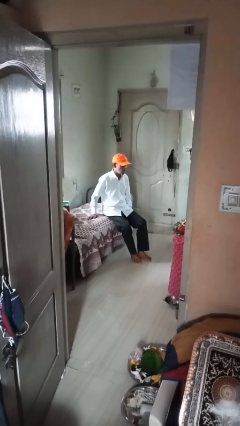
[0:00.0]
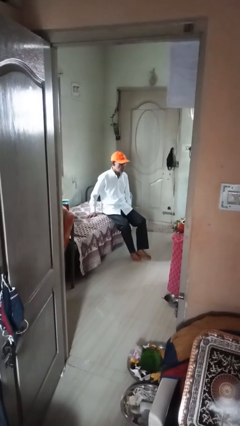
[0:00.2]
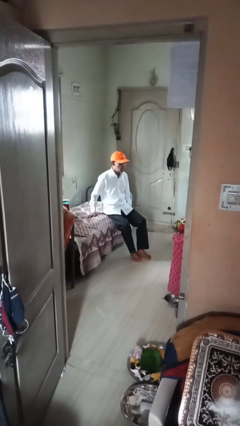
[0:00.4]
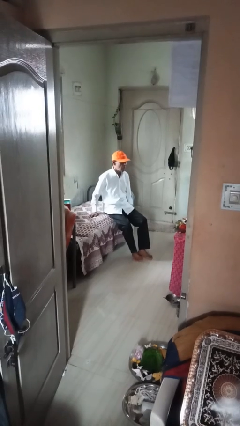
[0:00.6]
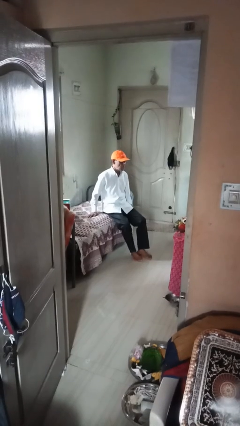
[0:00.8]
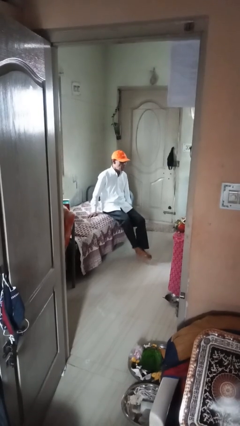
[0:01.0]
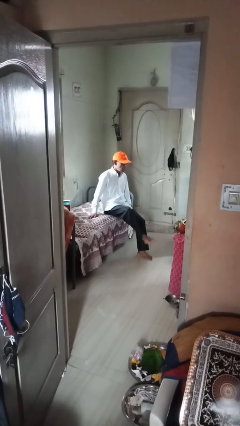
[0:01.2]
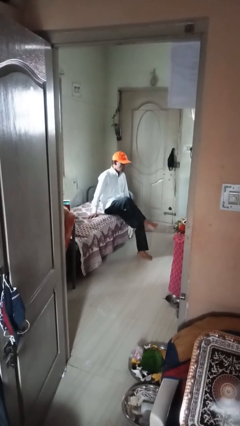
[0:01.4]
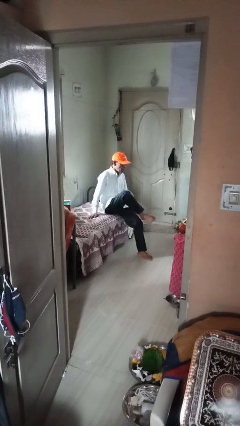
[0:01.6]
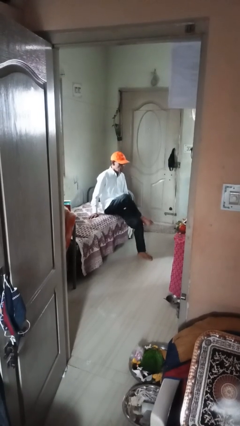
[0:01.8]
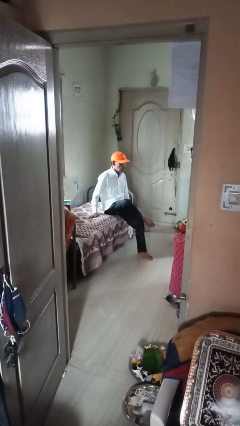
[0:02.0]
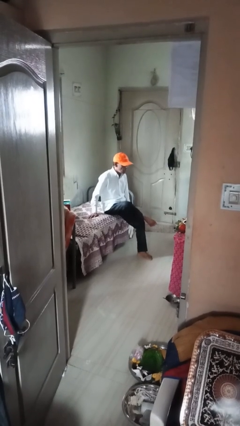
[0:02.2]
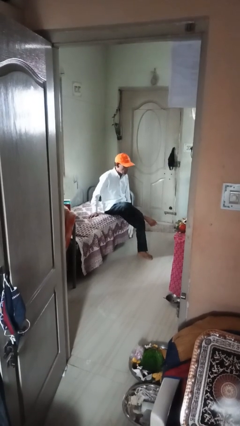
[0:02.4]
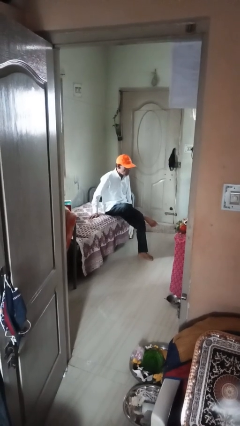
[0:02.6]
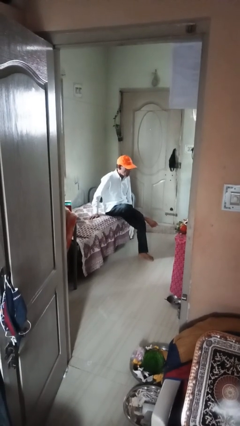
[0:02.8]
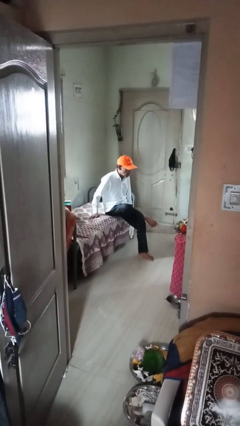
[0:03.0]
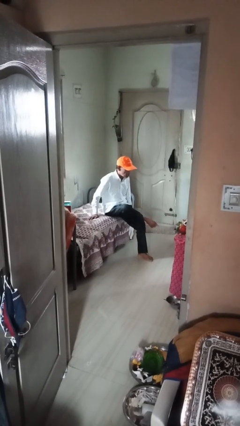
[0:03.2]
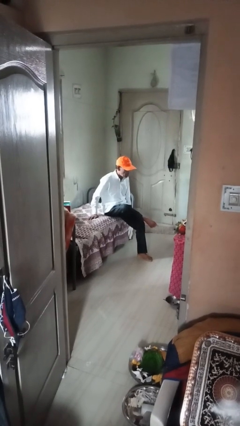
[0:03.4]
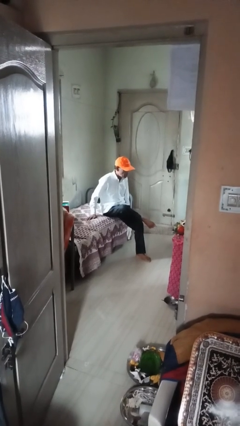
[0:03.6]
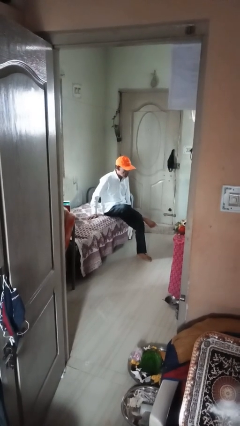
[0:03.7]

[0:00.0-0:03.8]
person crosses legs

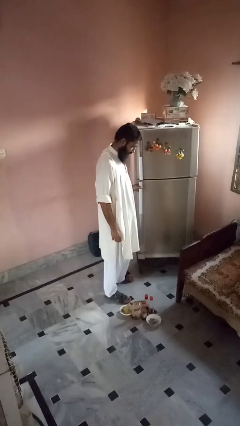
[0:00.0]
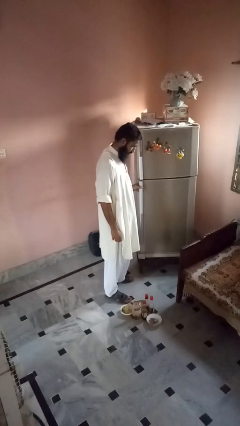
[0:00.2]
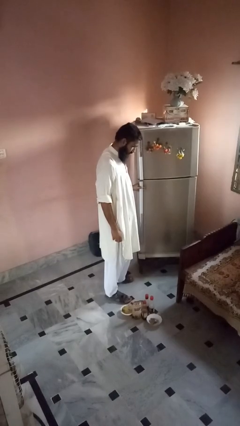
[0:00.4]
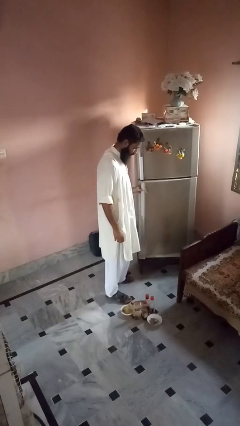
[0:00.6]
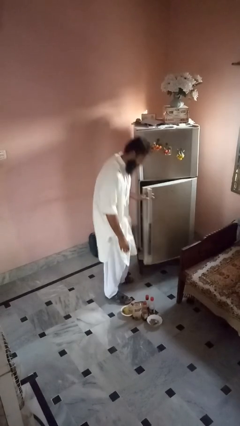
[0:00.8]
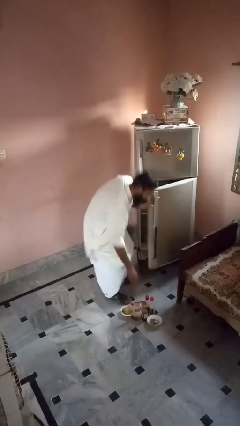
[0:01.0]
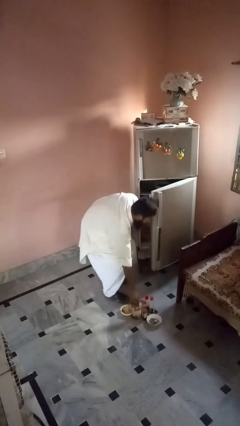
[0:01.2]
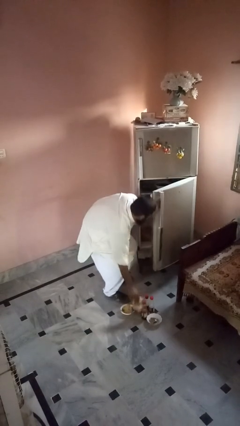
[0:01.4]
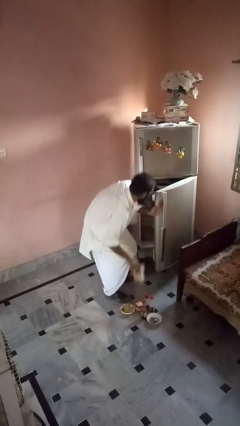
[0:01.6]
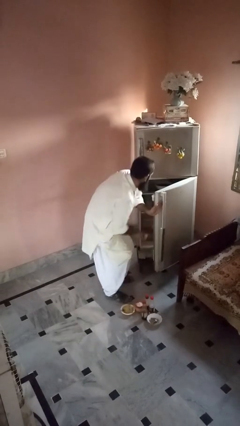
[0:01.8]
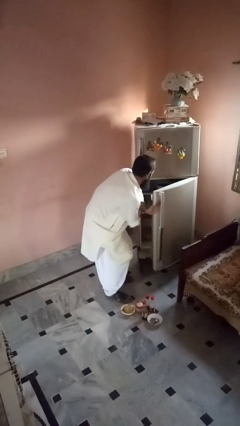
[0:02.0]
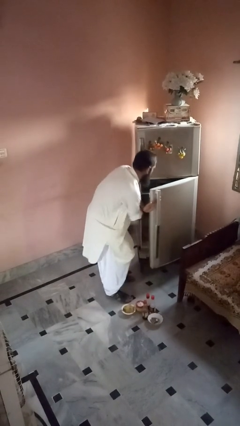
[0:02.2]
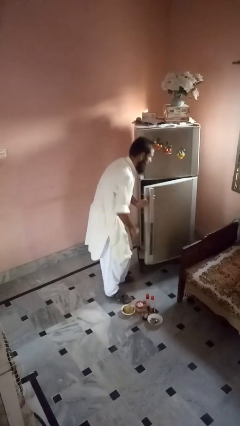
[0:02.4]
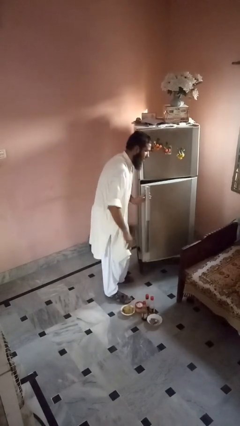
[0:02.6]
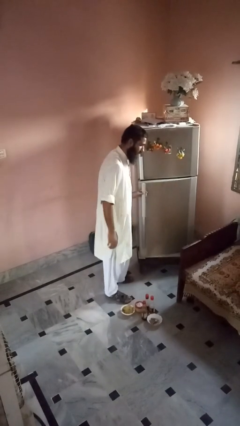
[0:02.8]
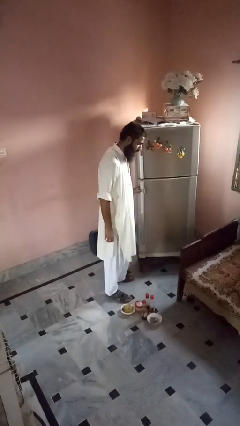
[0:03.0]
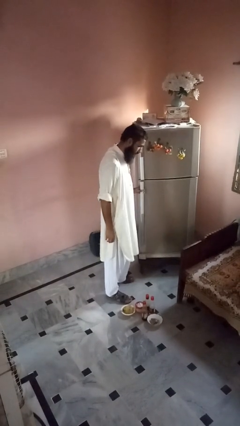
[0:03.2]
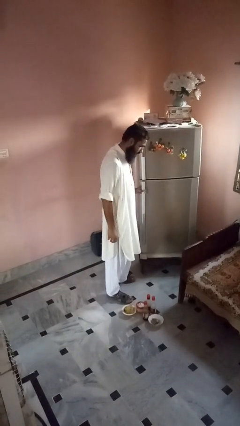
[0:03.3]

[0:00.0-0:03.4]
person loads groceries into refrigerator

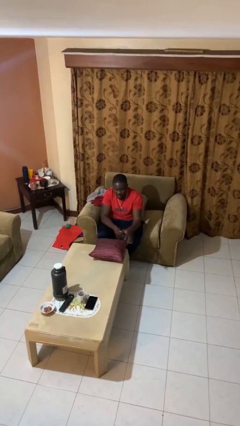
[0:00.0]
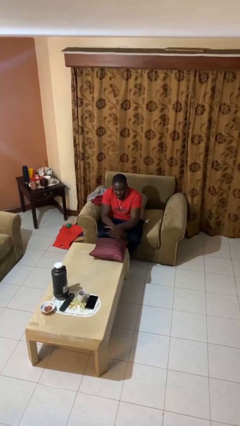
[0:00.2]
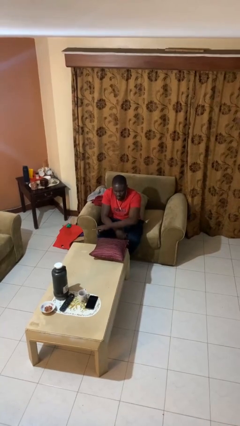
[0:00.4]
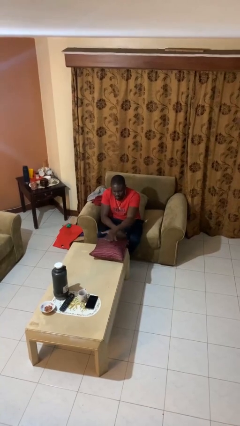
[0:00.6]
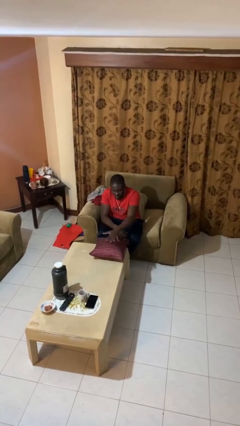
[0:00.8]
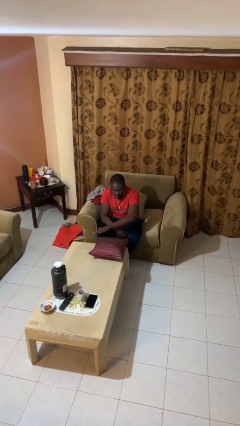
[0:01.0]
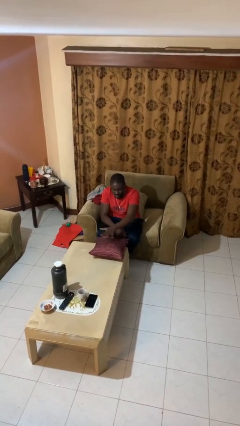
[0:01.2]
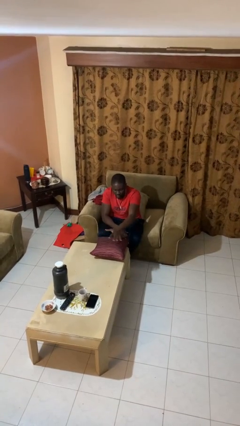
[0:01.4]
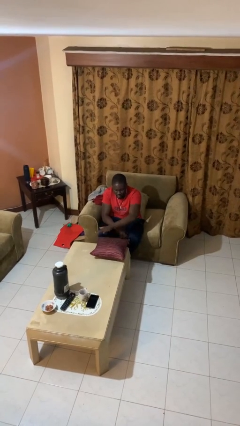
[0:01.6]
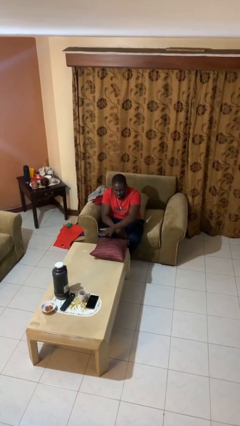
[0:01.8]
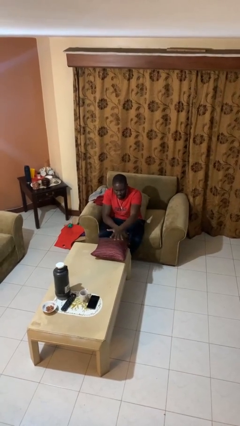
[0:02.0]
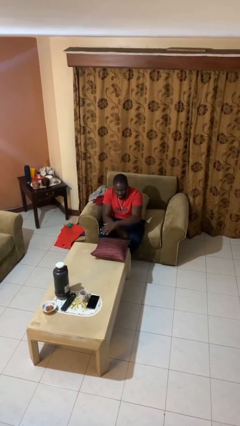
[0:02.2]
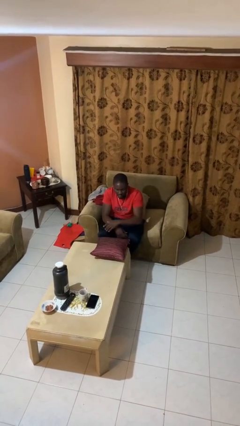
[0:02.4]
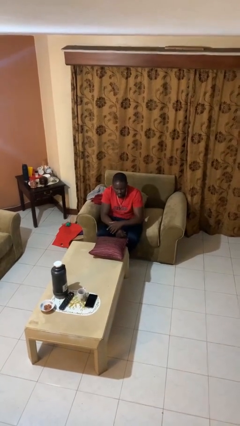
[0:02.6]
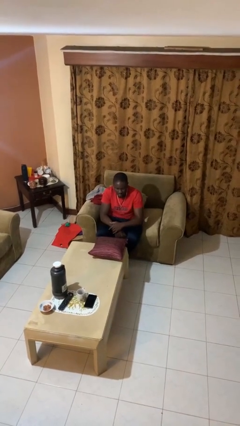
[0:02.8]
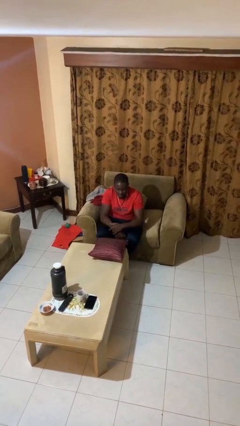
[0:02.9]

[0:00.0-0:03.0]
person waves hand over object

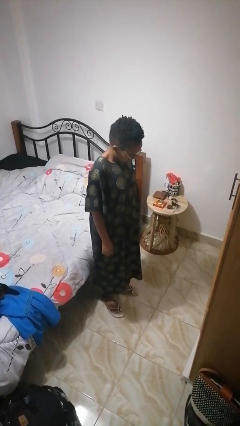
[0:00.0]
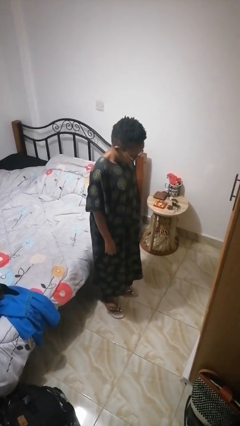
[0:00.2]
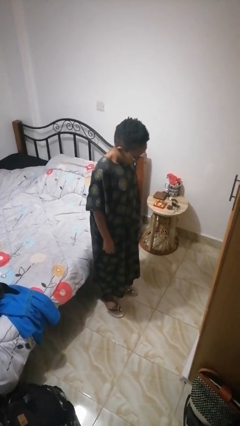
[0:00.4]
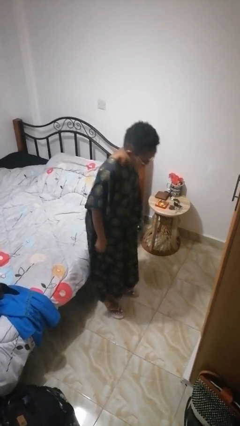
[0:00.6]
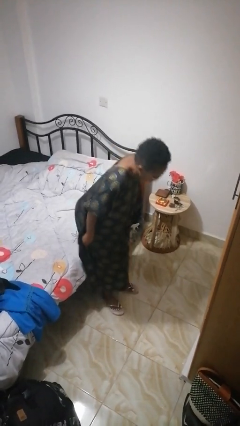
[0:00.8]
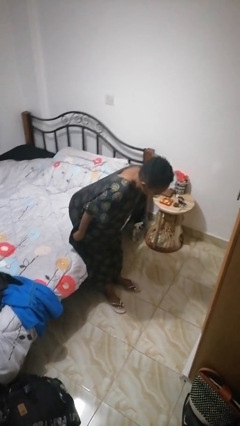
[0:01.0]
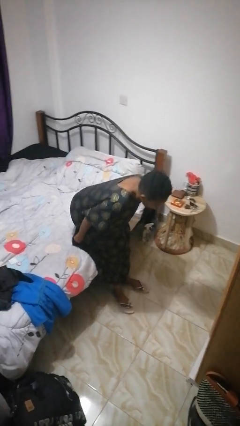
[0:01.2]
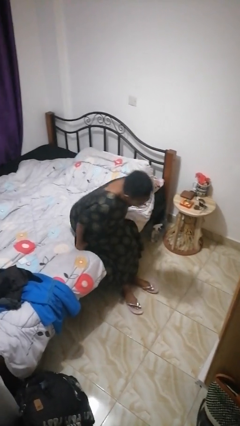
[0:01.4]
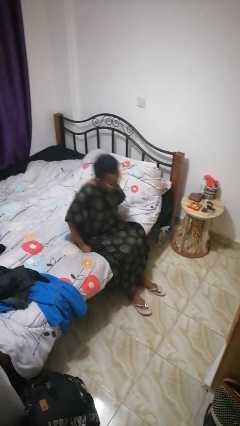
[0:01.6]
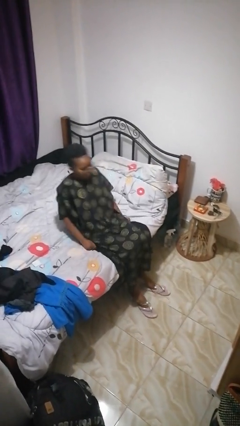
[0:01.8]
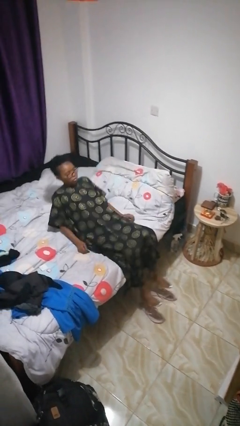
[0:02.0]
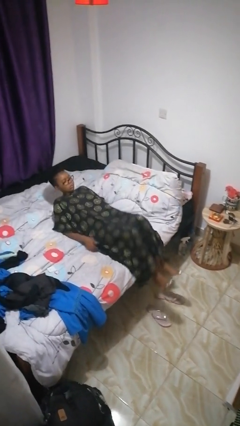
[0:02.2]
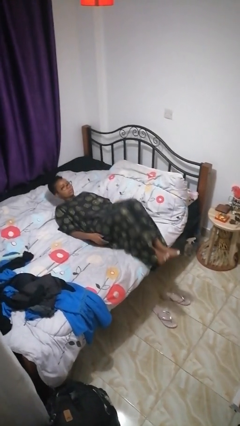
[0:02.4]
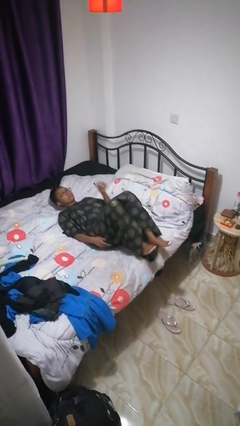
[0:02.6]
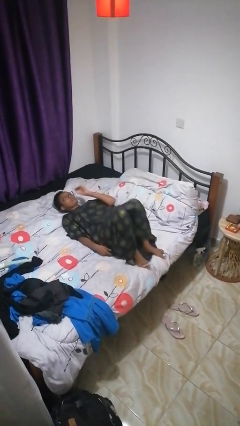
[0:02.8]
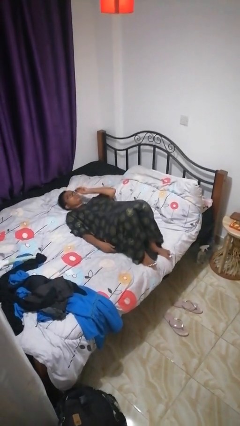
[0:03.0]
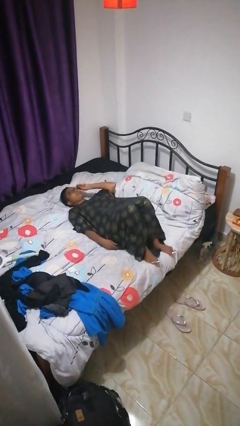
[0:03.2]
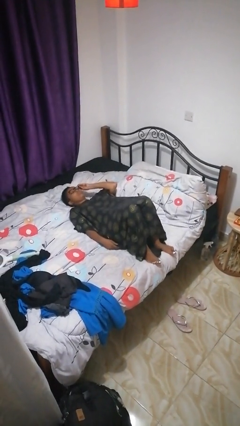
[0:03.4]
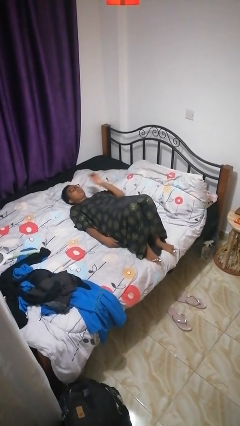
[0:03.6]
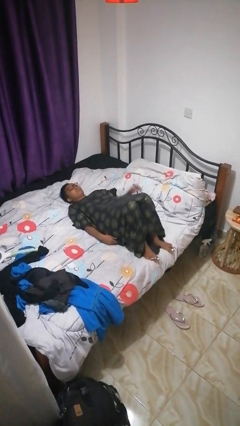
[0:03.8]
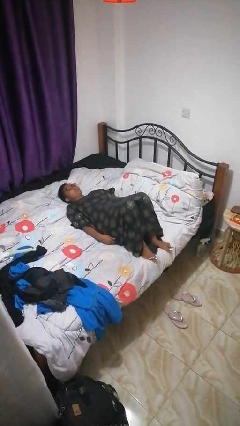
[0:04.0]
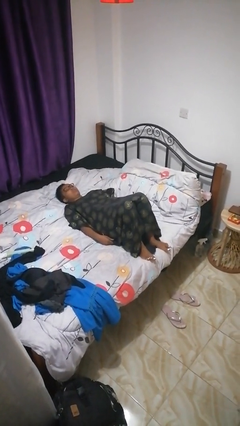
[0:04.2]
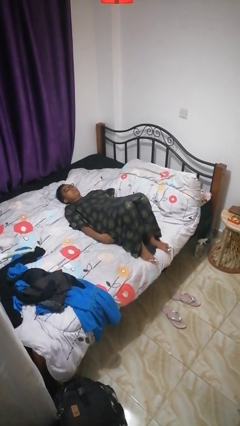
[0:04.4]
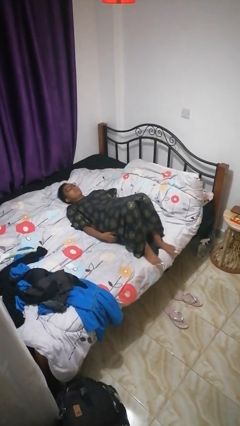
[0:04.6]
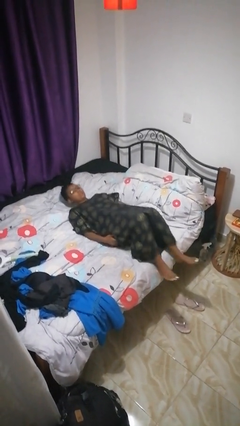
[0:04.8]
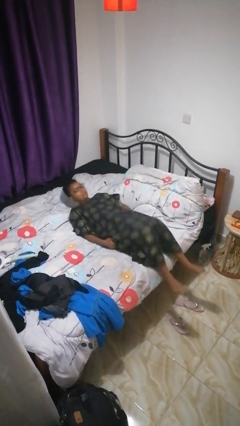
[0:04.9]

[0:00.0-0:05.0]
person lies down on bed

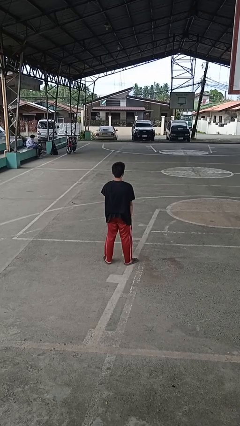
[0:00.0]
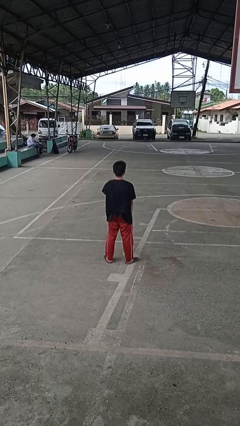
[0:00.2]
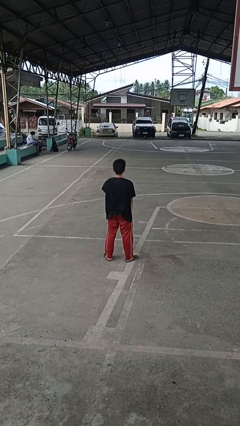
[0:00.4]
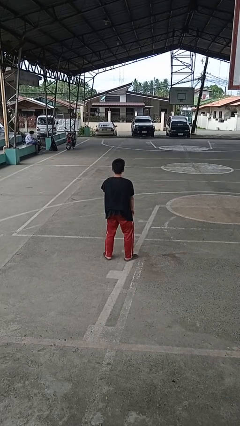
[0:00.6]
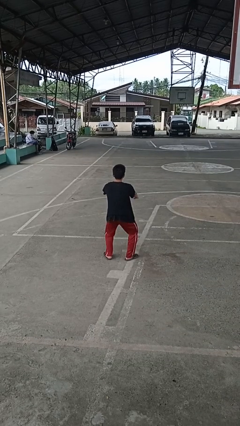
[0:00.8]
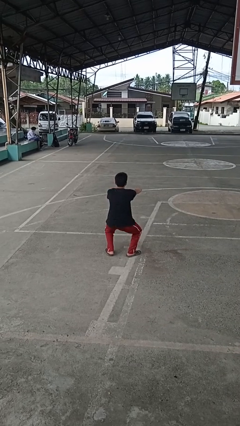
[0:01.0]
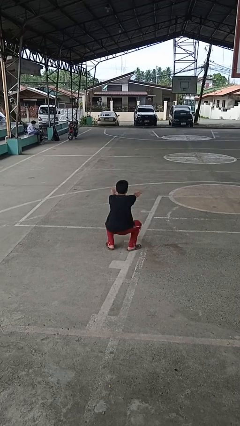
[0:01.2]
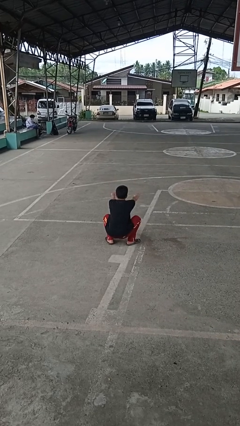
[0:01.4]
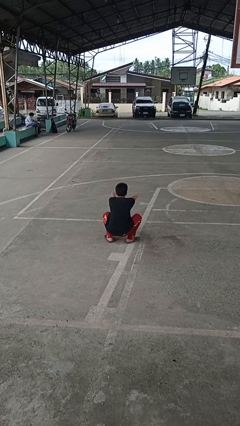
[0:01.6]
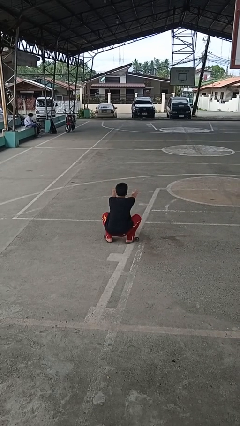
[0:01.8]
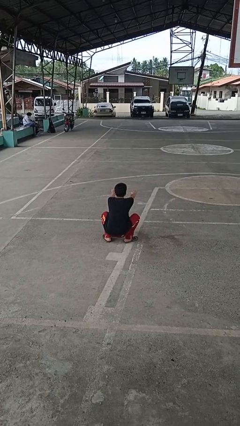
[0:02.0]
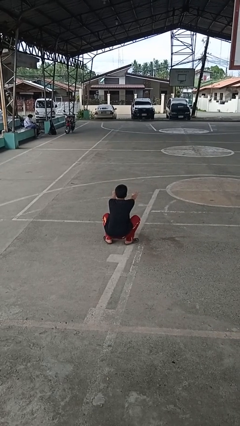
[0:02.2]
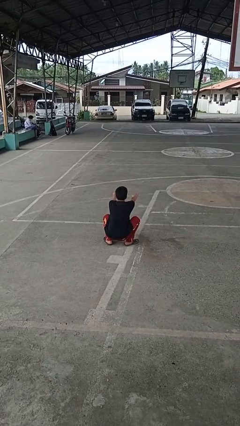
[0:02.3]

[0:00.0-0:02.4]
person squats
